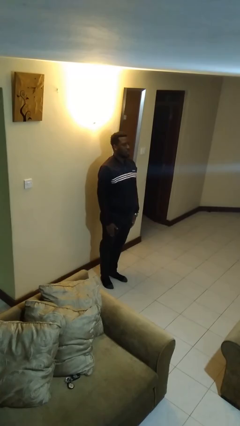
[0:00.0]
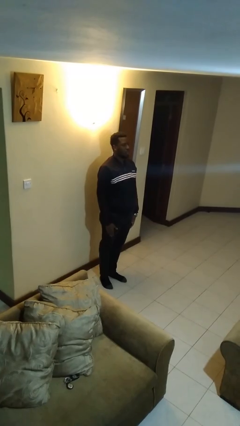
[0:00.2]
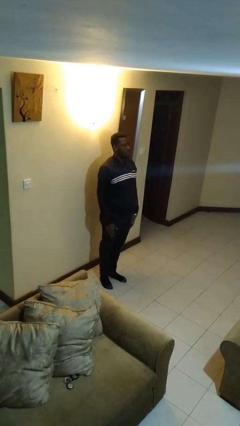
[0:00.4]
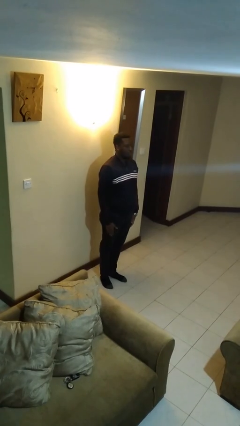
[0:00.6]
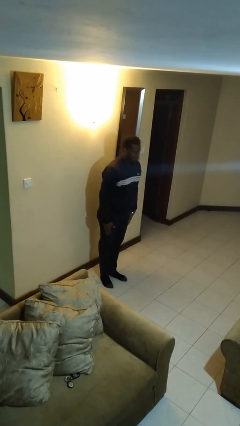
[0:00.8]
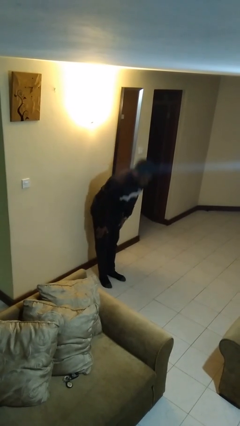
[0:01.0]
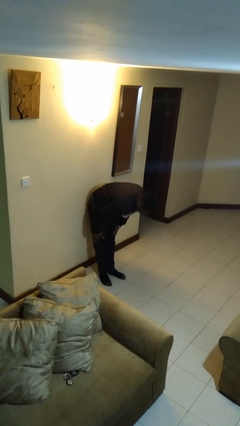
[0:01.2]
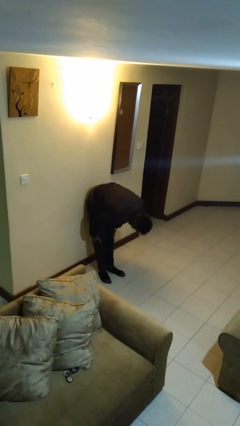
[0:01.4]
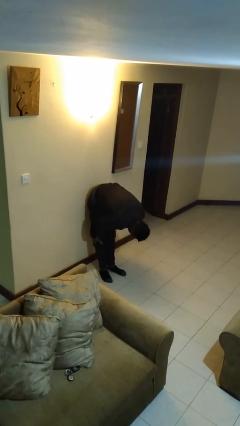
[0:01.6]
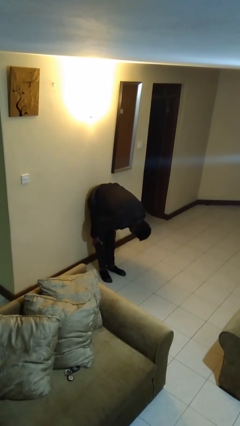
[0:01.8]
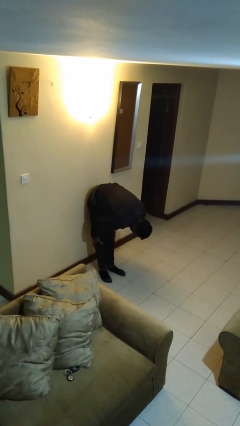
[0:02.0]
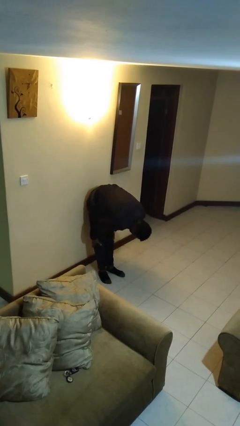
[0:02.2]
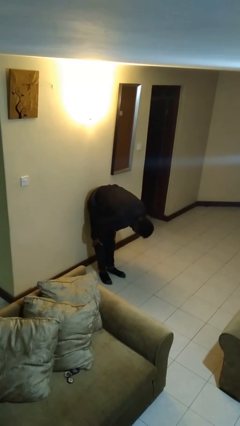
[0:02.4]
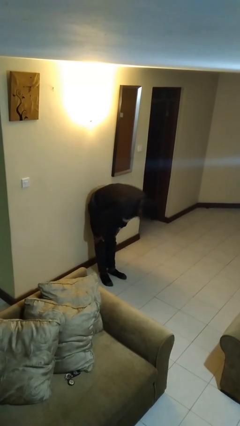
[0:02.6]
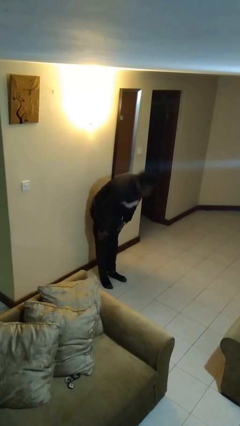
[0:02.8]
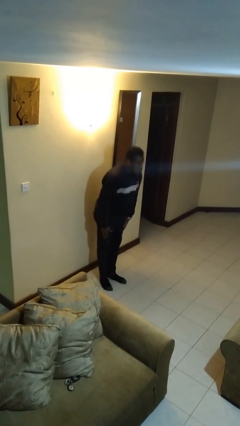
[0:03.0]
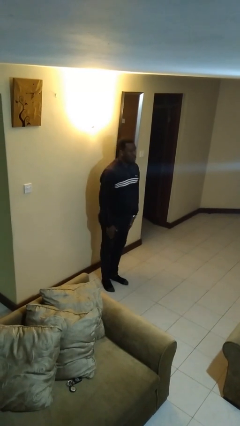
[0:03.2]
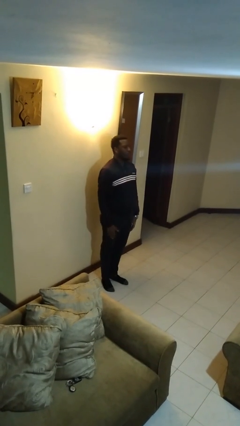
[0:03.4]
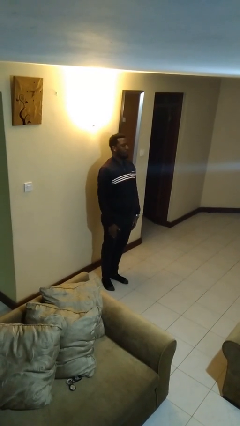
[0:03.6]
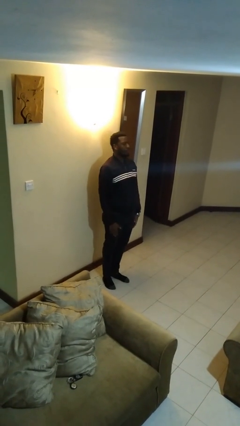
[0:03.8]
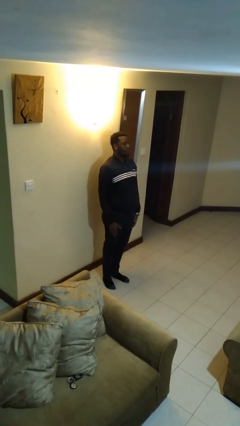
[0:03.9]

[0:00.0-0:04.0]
person bows

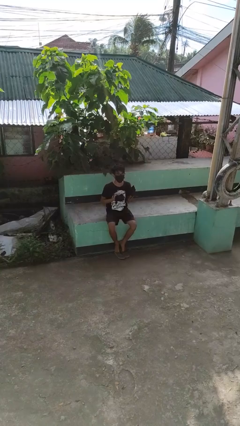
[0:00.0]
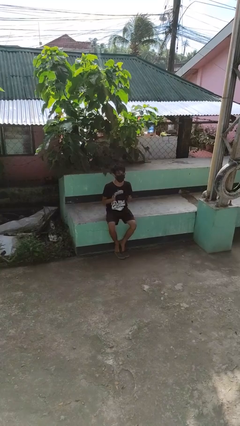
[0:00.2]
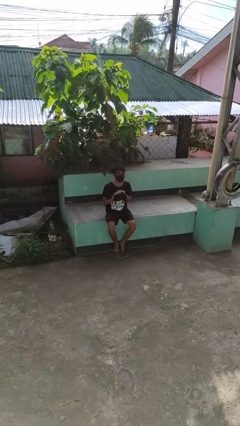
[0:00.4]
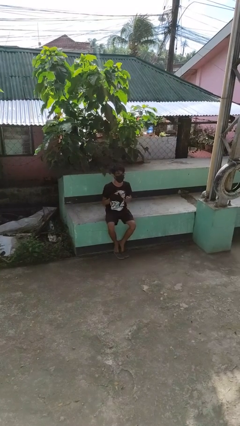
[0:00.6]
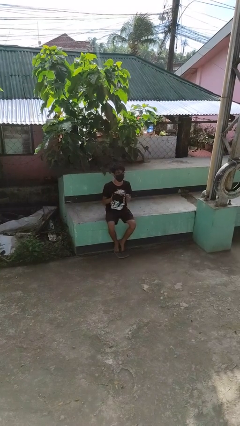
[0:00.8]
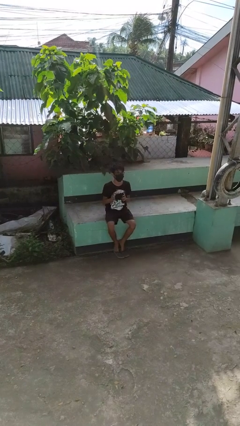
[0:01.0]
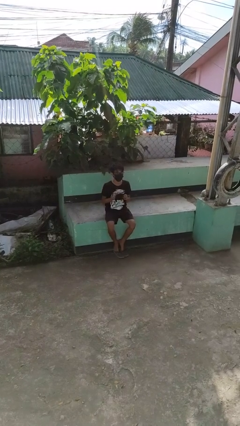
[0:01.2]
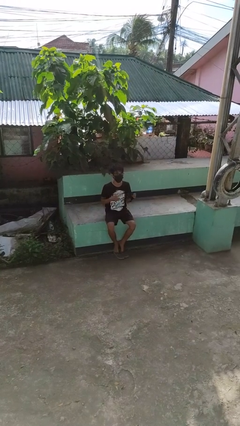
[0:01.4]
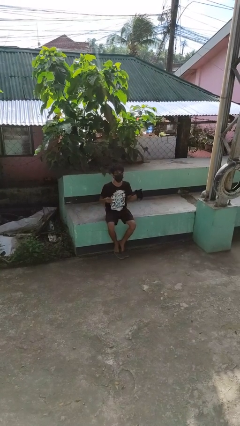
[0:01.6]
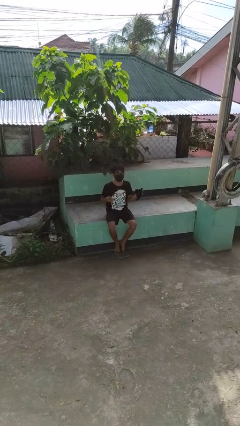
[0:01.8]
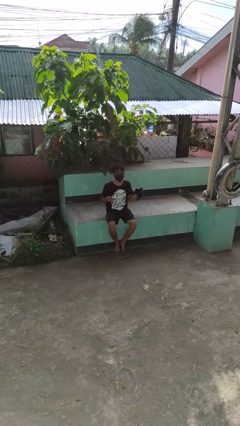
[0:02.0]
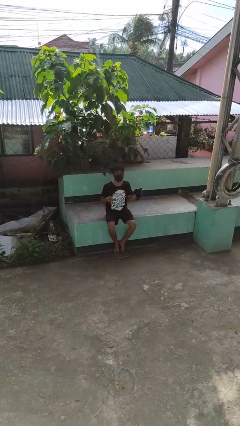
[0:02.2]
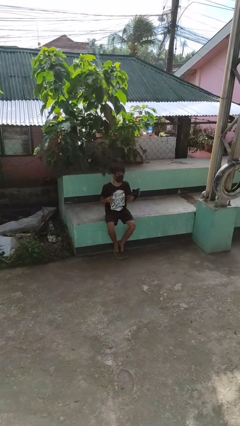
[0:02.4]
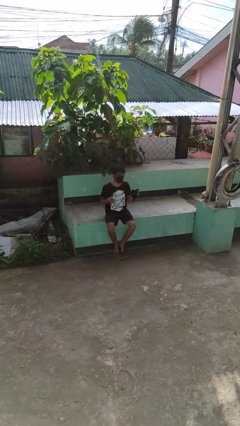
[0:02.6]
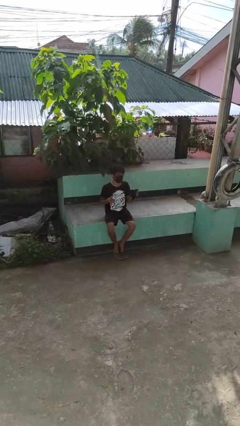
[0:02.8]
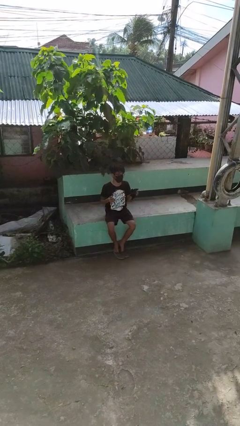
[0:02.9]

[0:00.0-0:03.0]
person takes off gloves

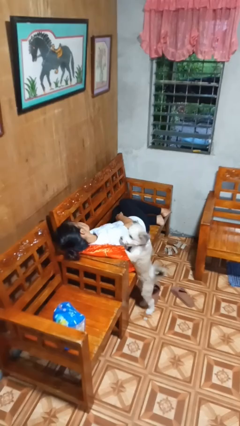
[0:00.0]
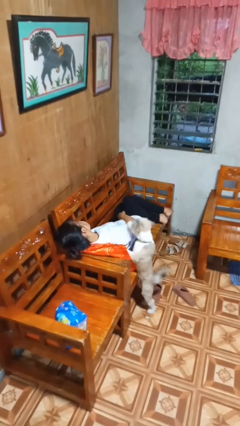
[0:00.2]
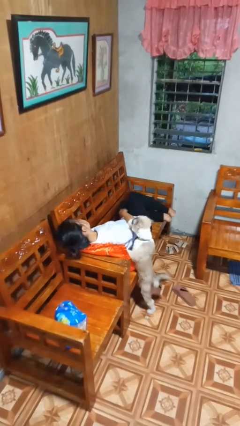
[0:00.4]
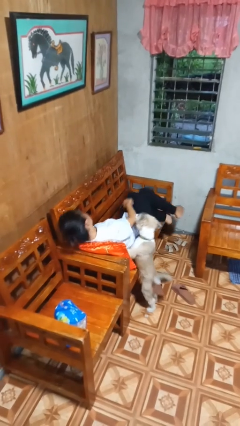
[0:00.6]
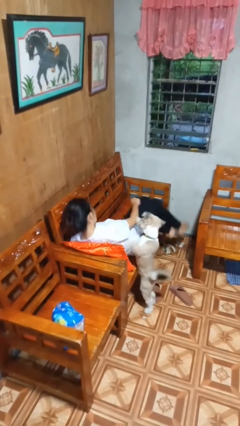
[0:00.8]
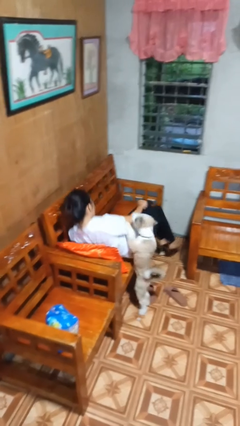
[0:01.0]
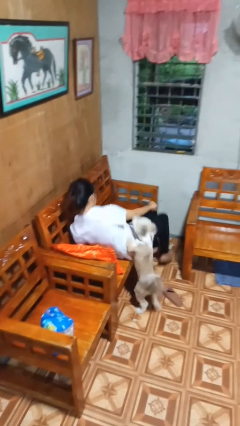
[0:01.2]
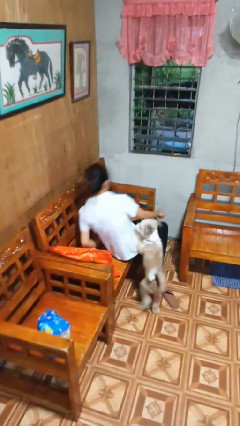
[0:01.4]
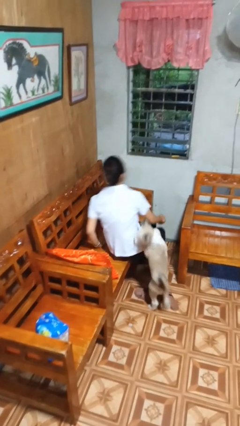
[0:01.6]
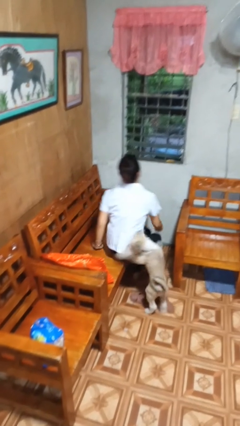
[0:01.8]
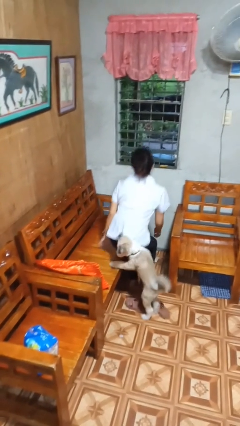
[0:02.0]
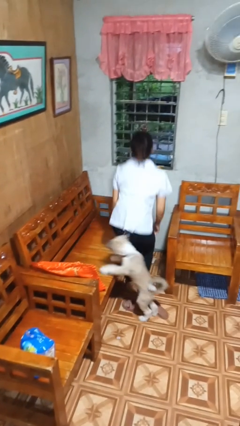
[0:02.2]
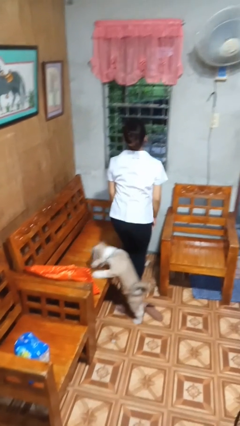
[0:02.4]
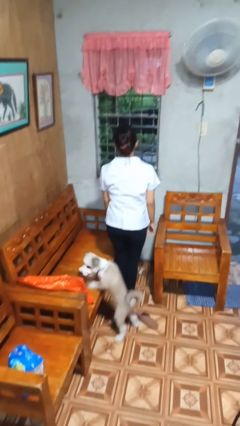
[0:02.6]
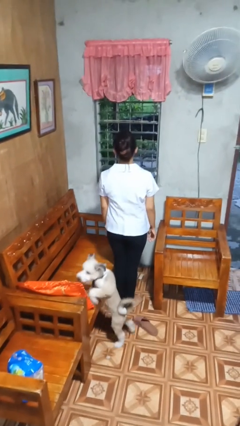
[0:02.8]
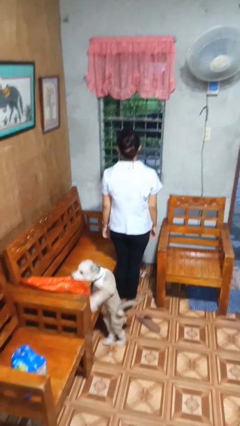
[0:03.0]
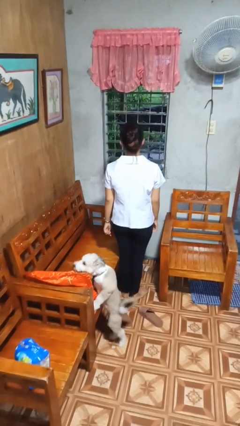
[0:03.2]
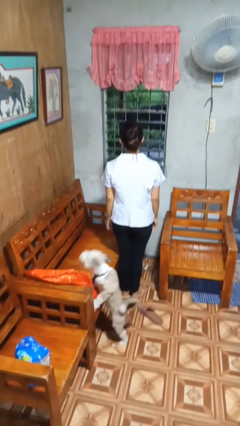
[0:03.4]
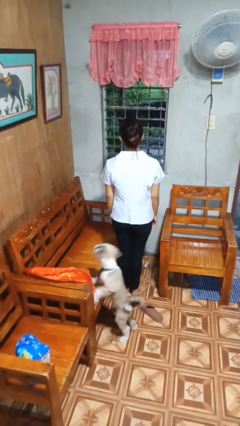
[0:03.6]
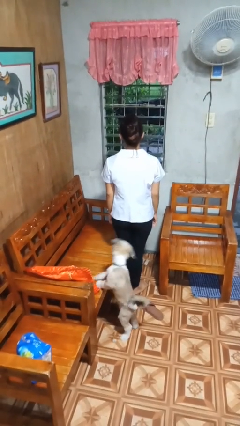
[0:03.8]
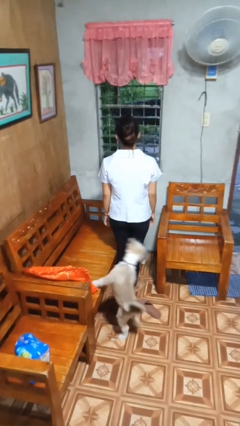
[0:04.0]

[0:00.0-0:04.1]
person stands up

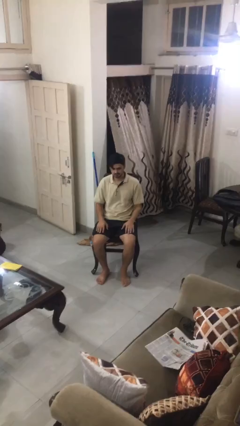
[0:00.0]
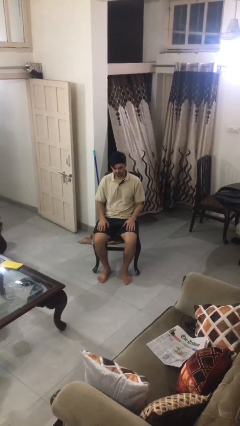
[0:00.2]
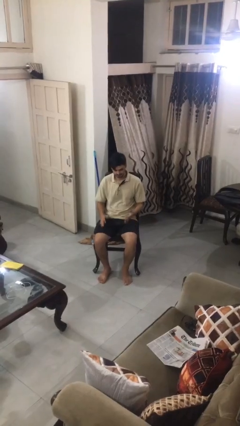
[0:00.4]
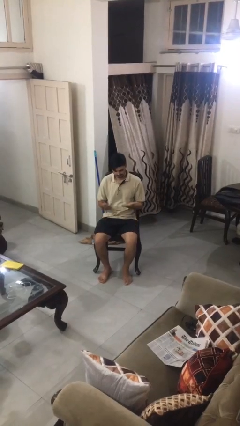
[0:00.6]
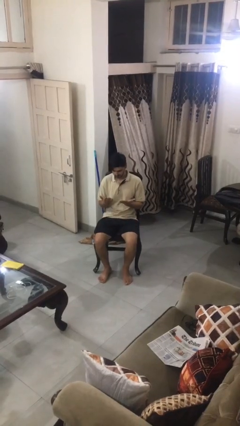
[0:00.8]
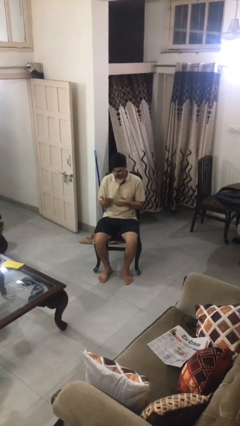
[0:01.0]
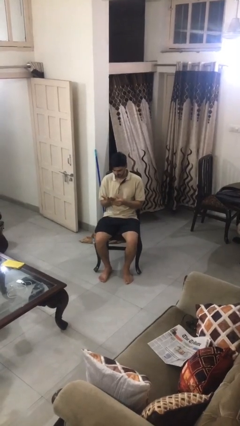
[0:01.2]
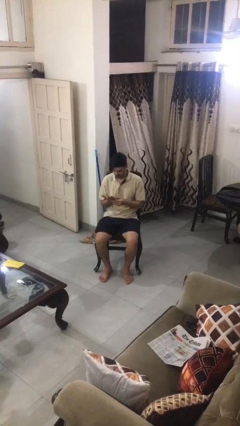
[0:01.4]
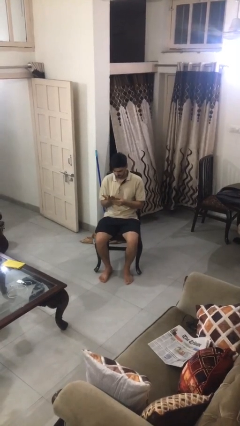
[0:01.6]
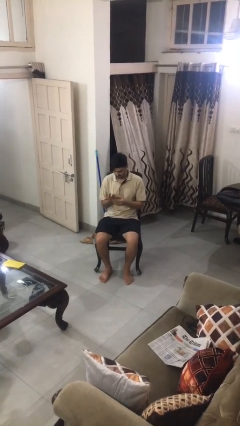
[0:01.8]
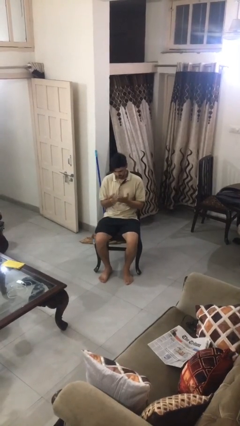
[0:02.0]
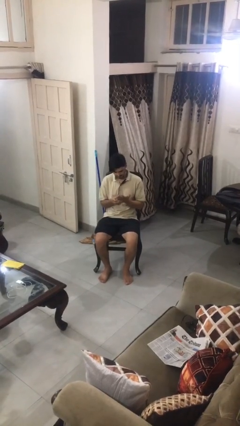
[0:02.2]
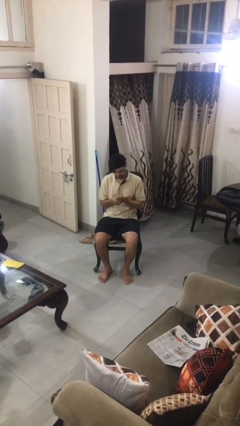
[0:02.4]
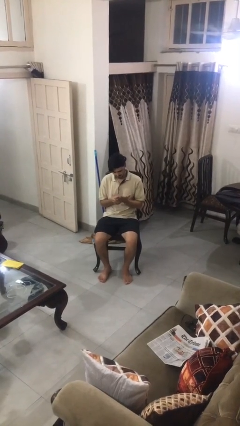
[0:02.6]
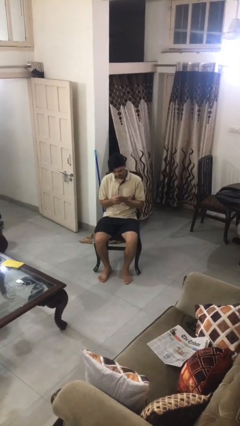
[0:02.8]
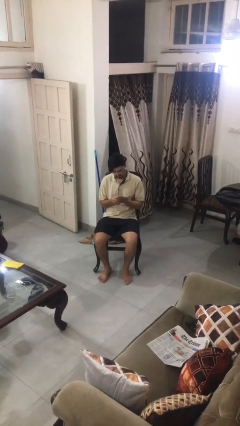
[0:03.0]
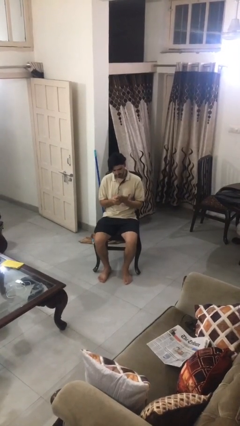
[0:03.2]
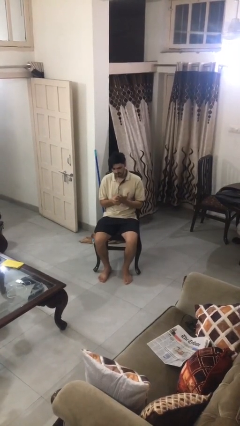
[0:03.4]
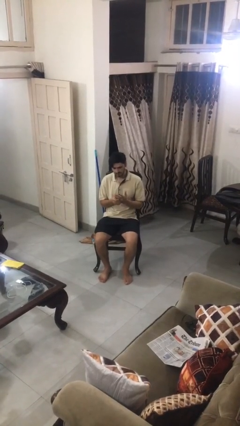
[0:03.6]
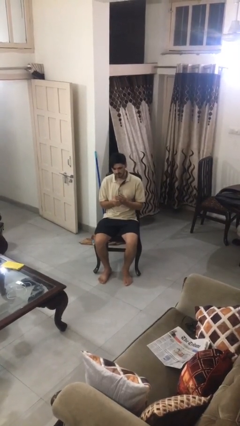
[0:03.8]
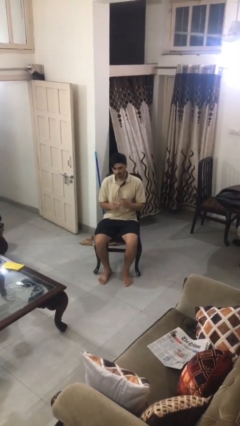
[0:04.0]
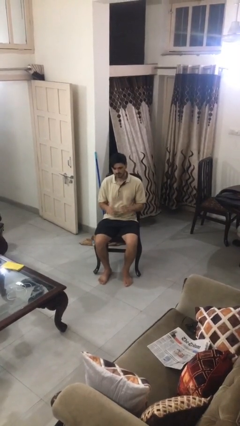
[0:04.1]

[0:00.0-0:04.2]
person looks at hands in lap

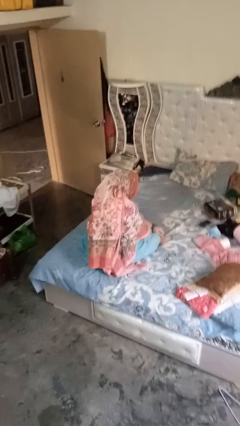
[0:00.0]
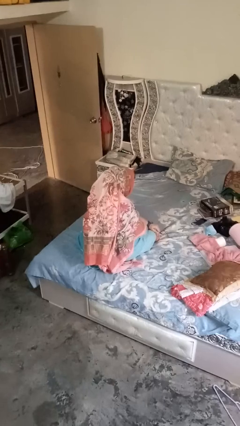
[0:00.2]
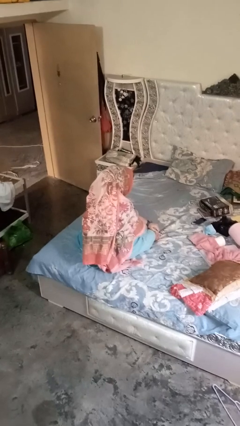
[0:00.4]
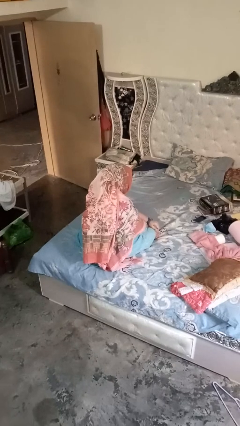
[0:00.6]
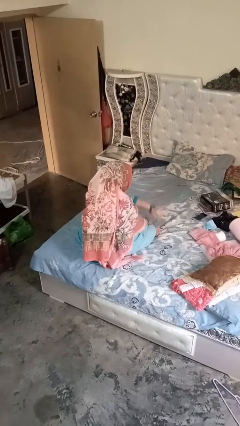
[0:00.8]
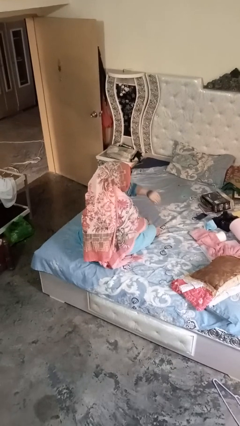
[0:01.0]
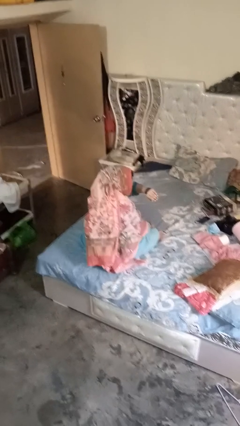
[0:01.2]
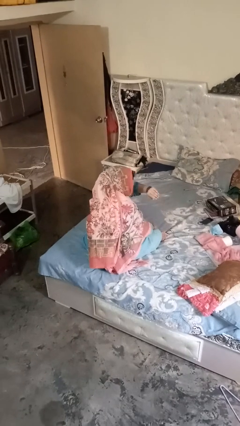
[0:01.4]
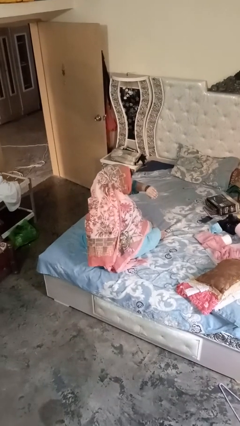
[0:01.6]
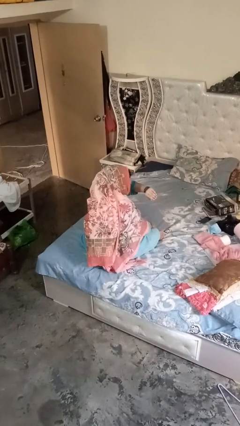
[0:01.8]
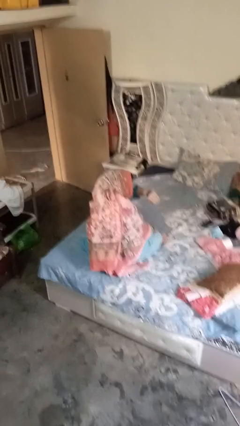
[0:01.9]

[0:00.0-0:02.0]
person gestures watch closely
